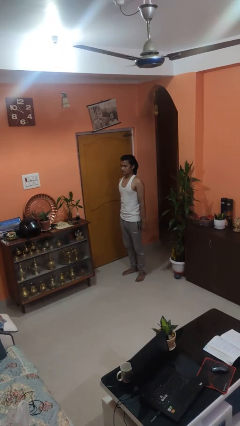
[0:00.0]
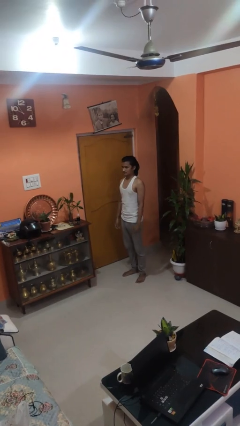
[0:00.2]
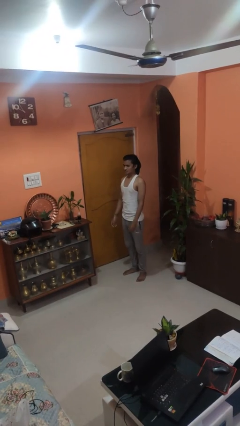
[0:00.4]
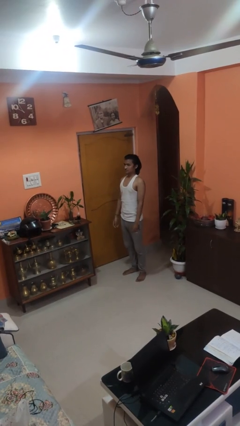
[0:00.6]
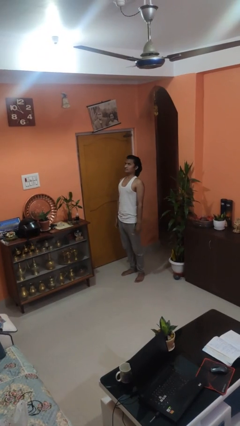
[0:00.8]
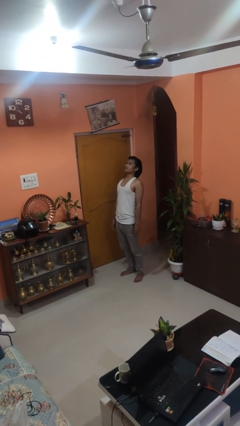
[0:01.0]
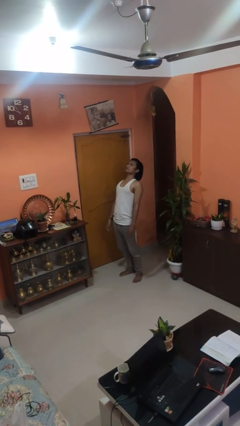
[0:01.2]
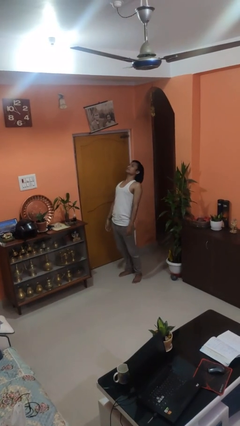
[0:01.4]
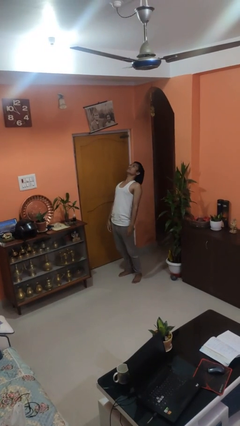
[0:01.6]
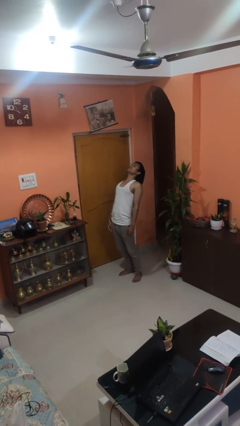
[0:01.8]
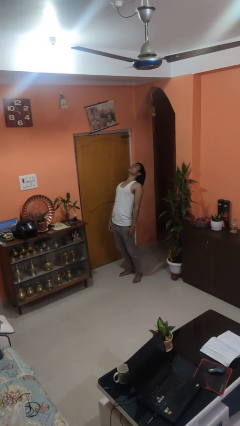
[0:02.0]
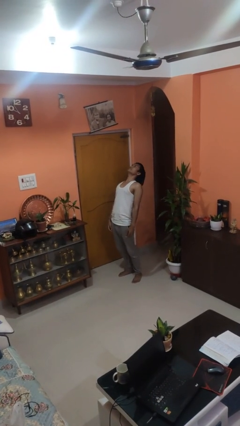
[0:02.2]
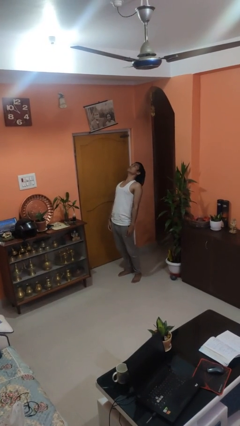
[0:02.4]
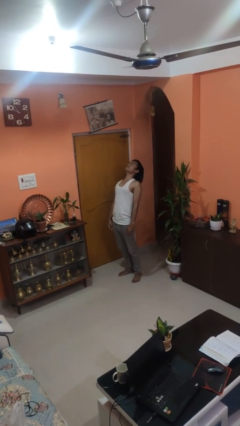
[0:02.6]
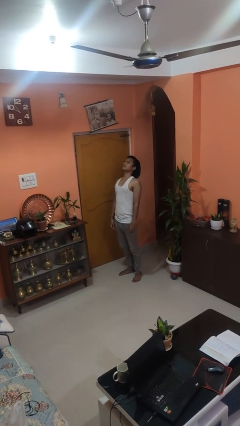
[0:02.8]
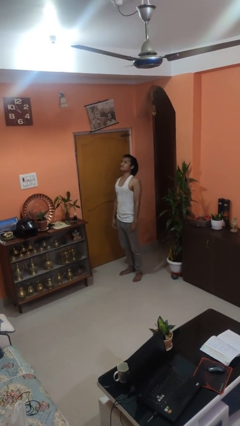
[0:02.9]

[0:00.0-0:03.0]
person stretches back

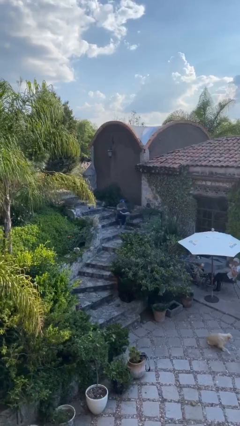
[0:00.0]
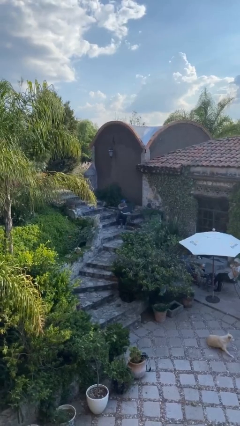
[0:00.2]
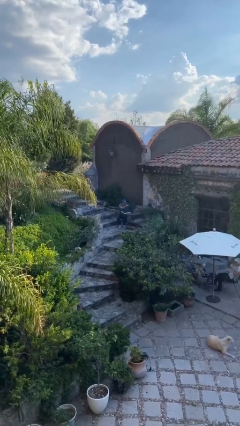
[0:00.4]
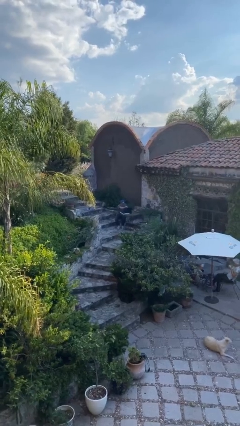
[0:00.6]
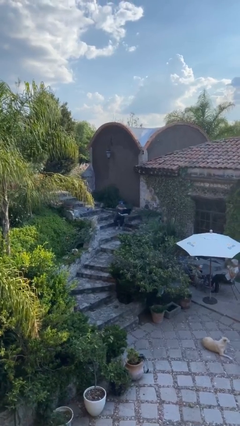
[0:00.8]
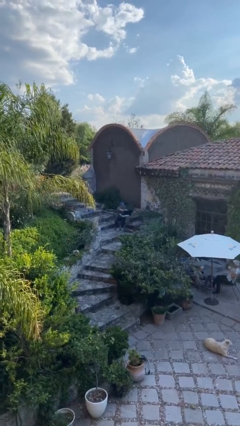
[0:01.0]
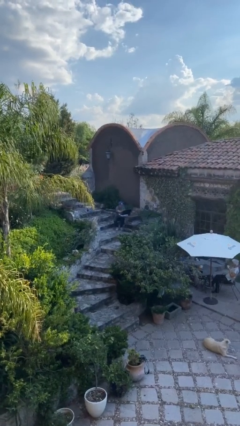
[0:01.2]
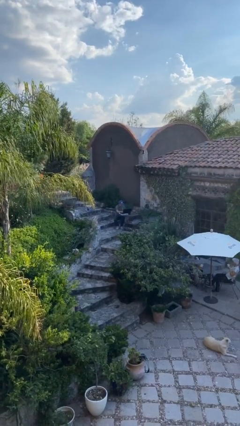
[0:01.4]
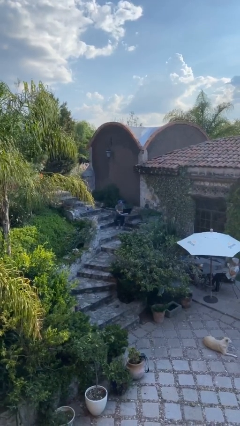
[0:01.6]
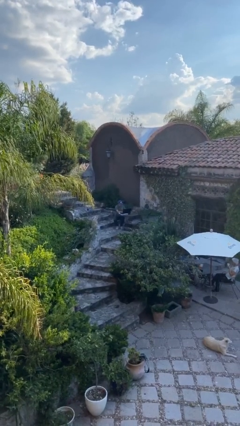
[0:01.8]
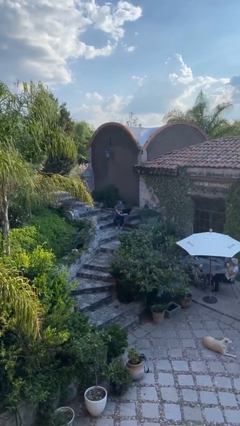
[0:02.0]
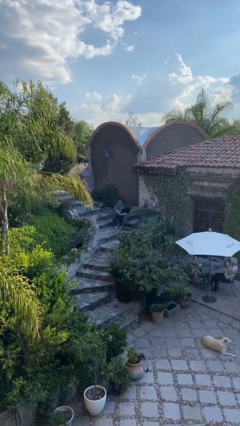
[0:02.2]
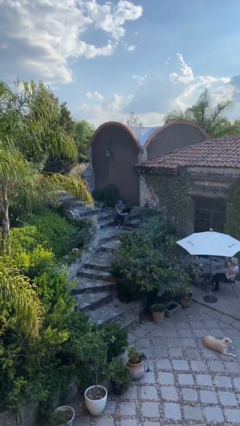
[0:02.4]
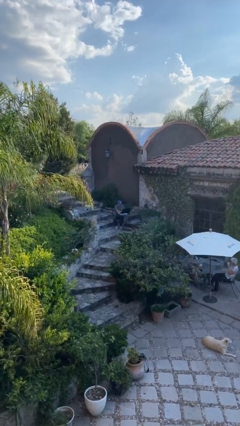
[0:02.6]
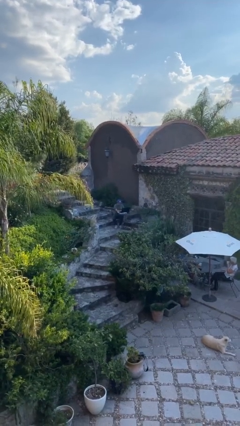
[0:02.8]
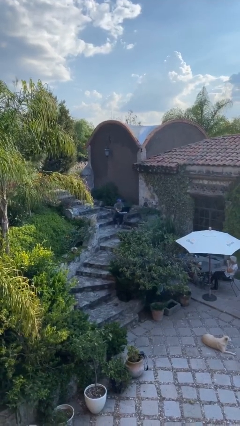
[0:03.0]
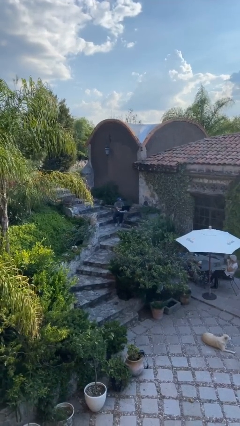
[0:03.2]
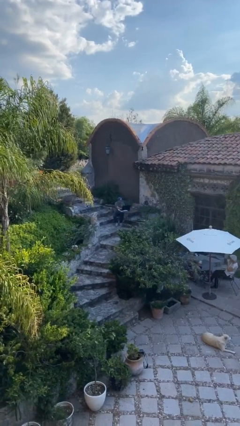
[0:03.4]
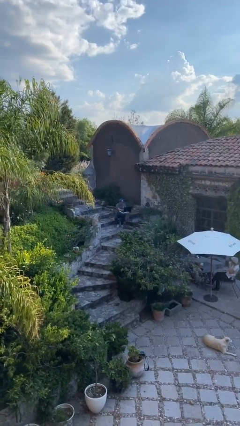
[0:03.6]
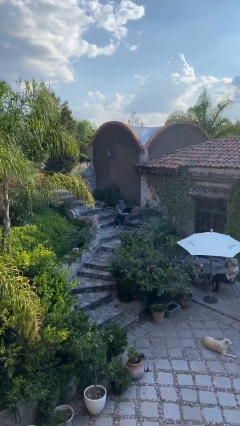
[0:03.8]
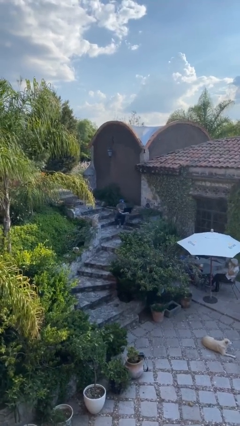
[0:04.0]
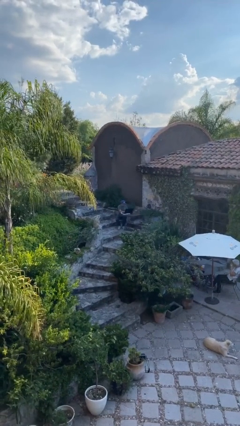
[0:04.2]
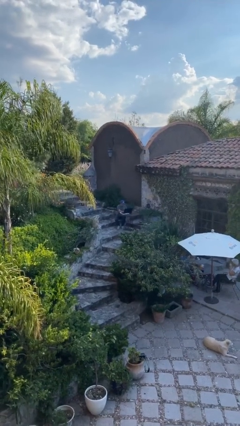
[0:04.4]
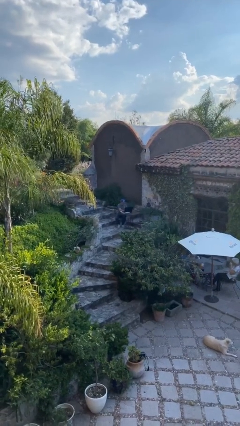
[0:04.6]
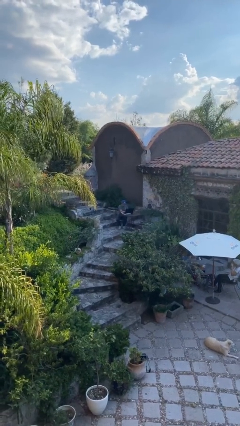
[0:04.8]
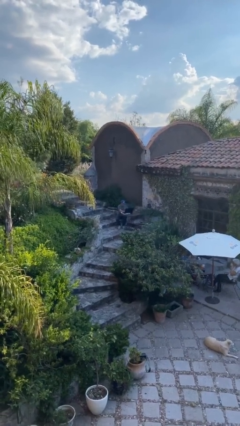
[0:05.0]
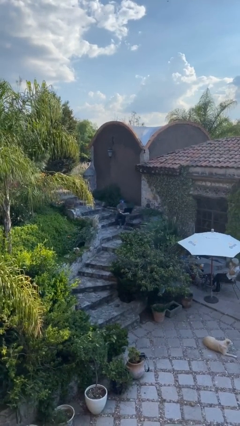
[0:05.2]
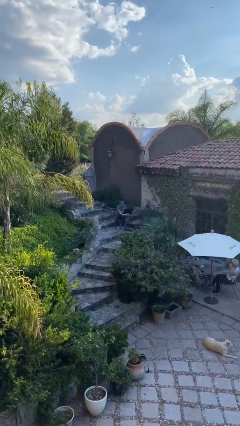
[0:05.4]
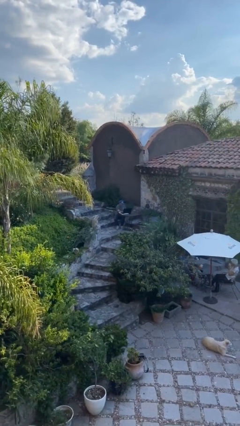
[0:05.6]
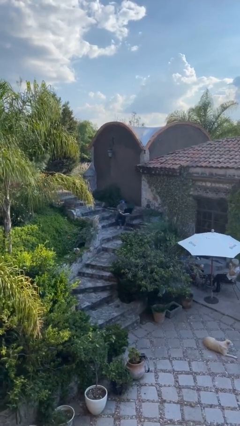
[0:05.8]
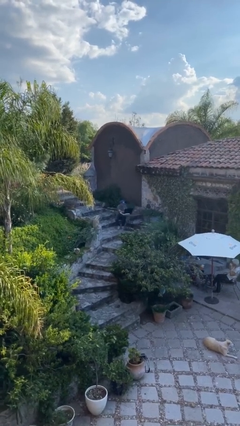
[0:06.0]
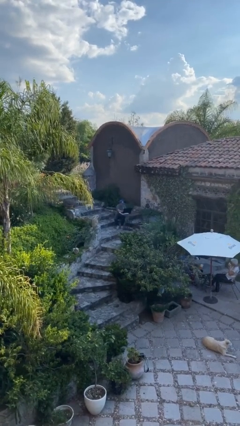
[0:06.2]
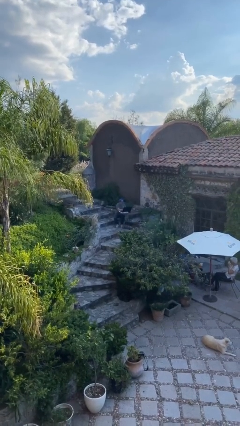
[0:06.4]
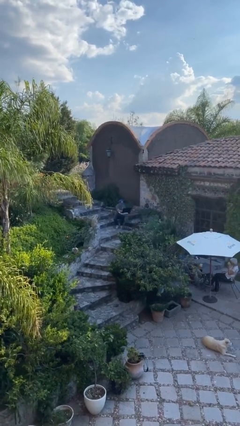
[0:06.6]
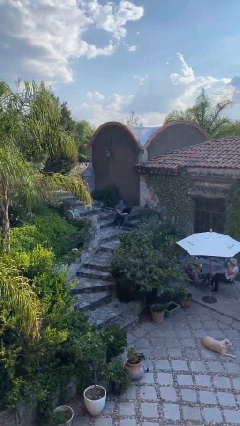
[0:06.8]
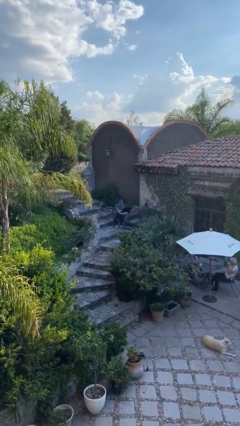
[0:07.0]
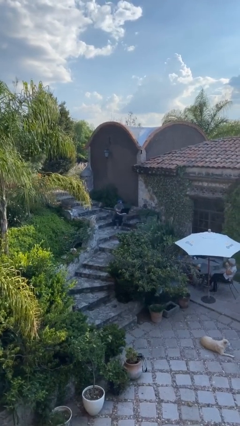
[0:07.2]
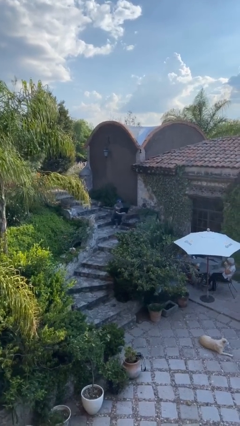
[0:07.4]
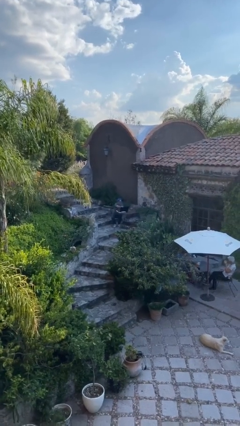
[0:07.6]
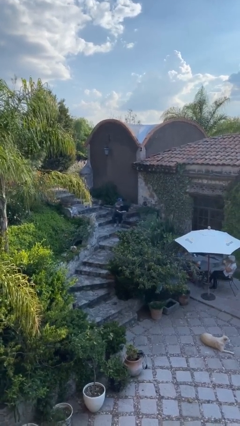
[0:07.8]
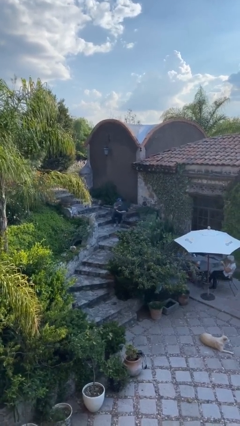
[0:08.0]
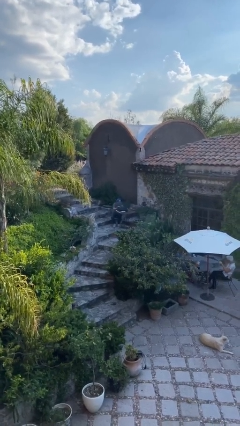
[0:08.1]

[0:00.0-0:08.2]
person interacts with laptop

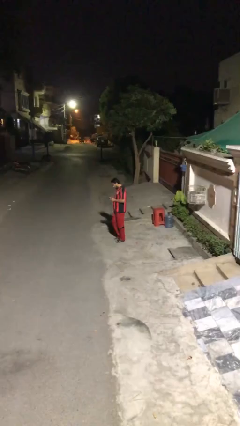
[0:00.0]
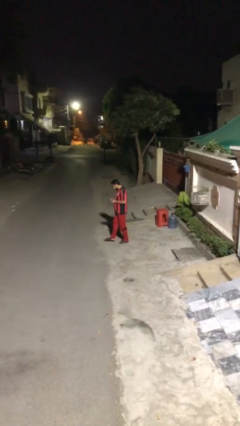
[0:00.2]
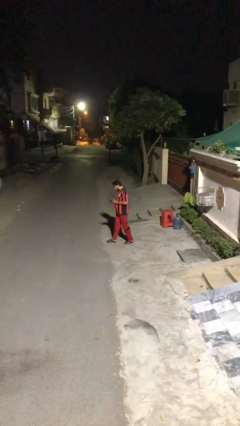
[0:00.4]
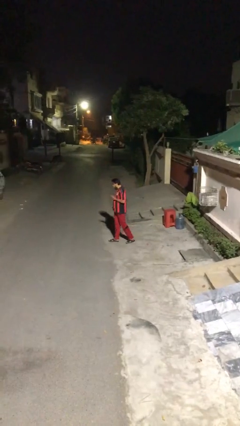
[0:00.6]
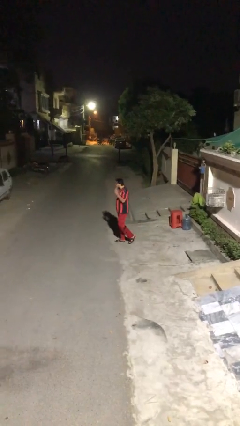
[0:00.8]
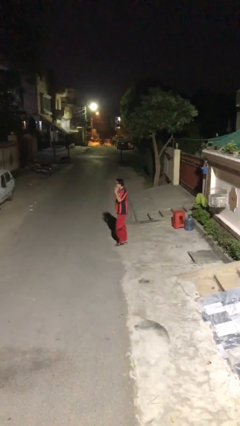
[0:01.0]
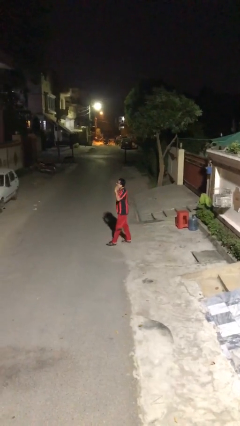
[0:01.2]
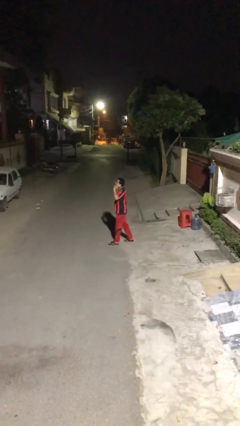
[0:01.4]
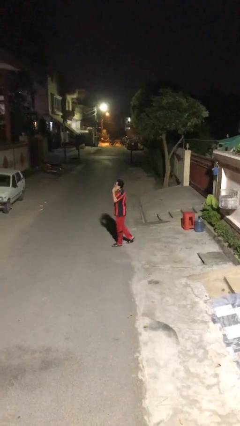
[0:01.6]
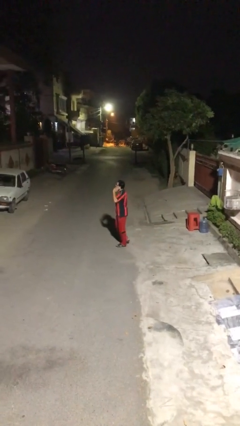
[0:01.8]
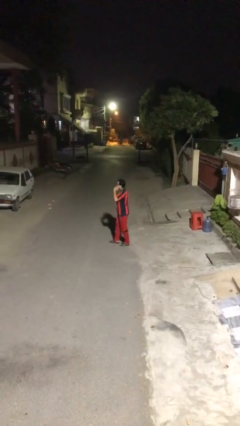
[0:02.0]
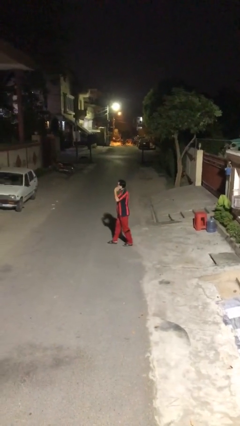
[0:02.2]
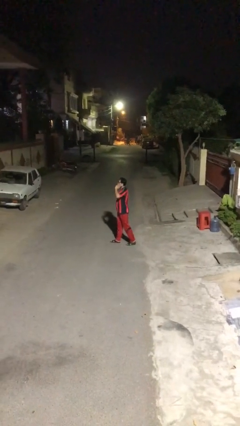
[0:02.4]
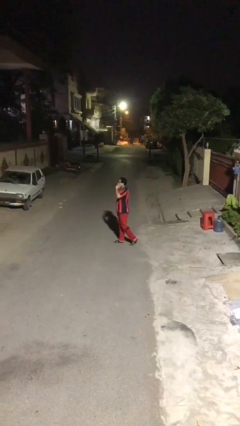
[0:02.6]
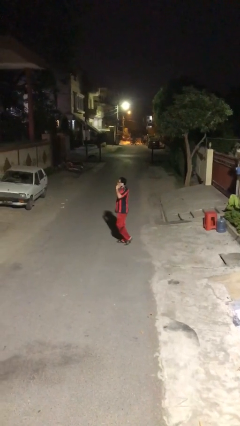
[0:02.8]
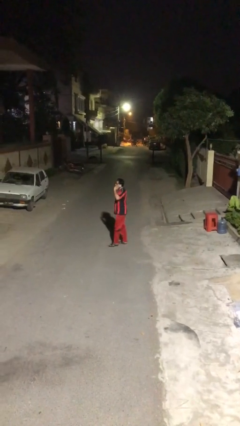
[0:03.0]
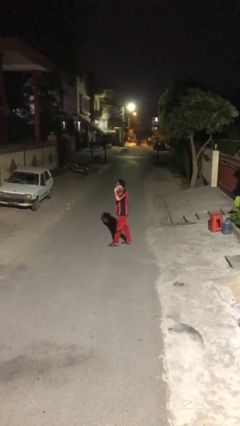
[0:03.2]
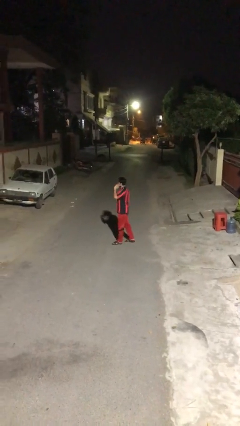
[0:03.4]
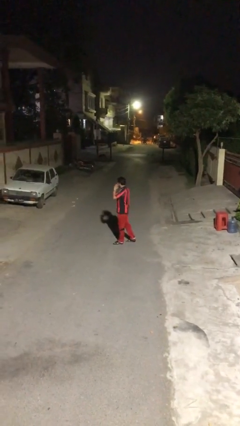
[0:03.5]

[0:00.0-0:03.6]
person talks on phone

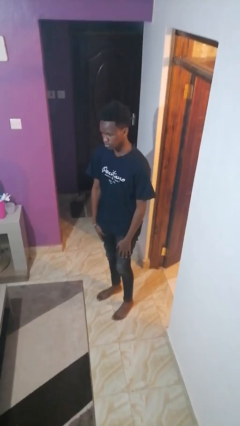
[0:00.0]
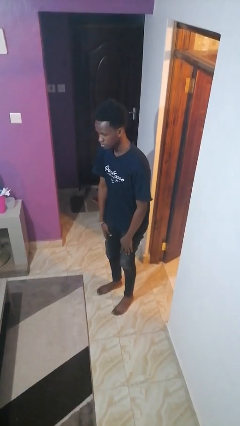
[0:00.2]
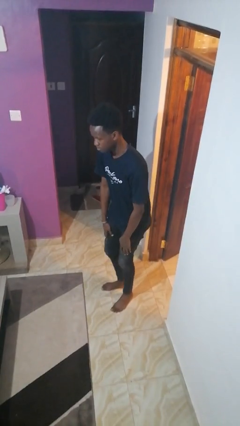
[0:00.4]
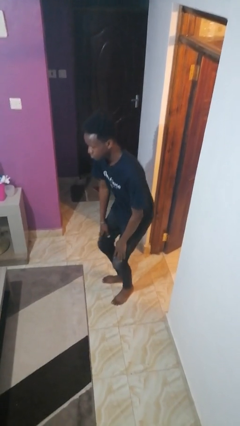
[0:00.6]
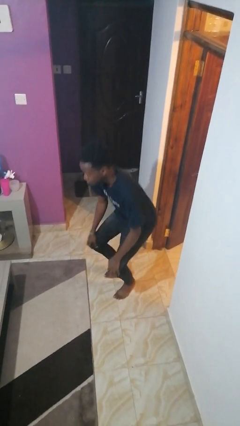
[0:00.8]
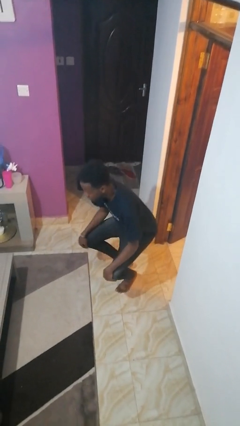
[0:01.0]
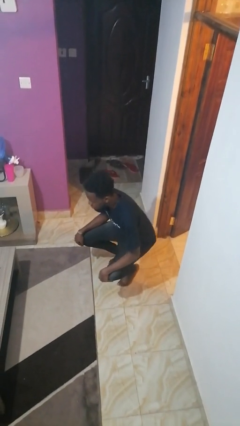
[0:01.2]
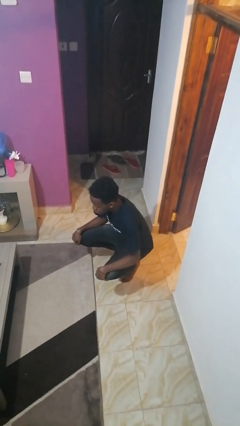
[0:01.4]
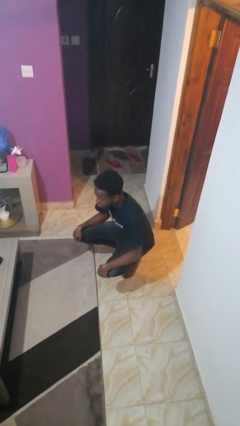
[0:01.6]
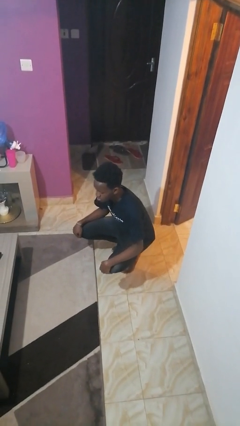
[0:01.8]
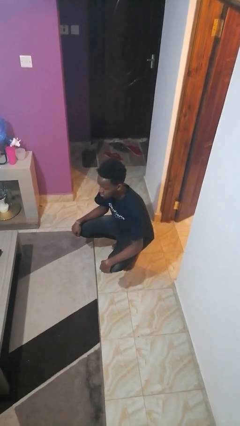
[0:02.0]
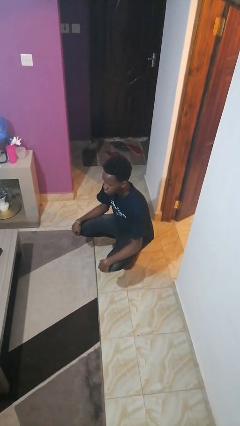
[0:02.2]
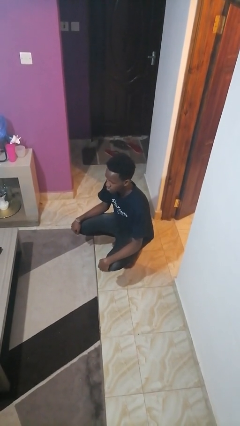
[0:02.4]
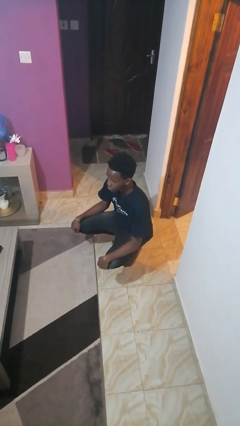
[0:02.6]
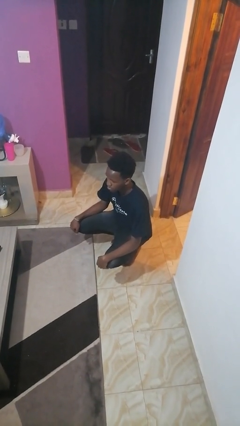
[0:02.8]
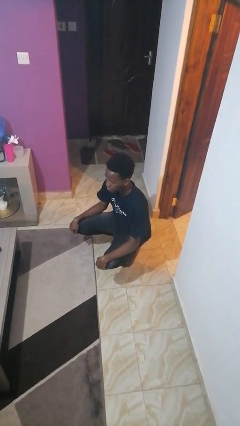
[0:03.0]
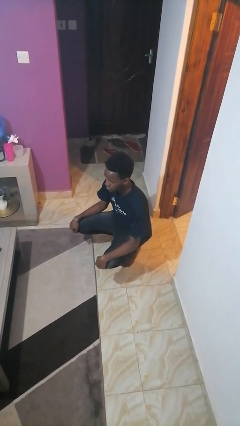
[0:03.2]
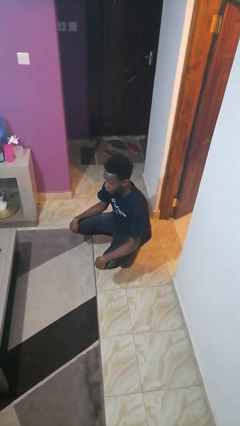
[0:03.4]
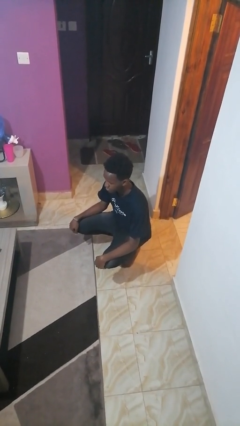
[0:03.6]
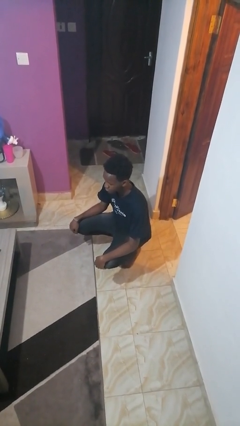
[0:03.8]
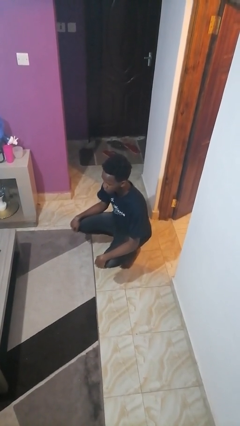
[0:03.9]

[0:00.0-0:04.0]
person squats
